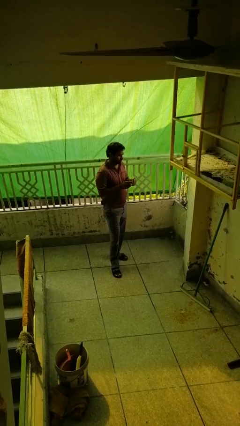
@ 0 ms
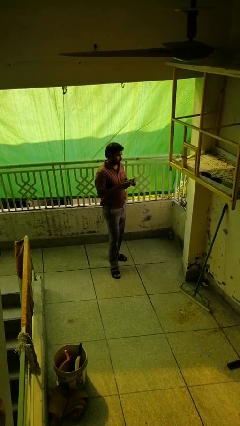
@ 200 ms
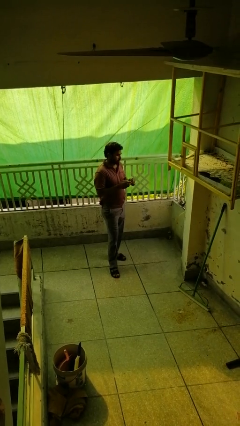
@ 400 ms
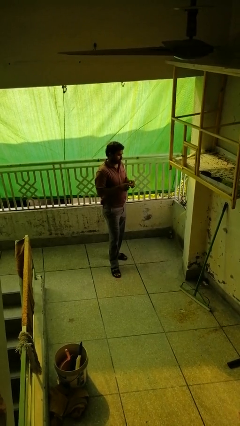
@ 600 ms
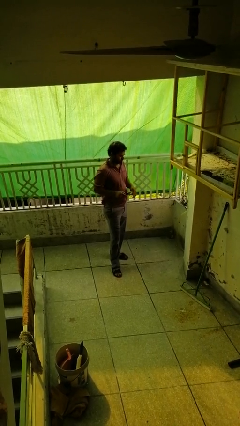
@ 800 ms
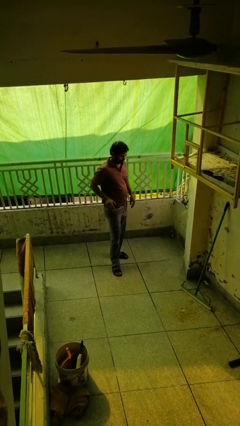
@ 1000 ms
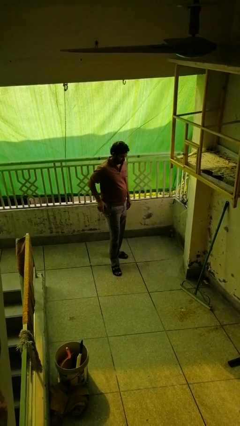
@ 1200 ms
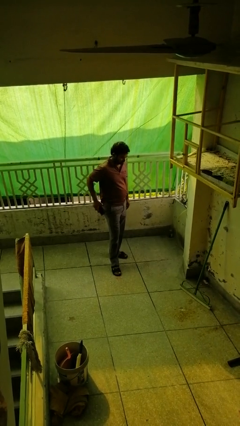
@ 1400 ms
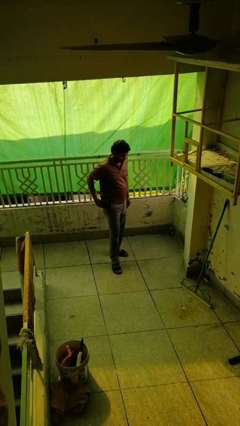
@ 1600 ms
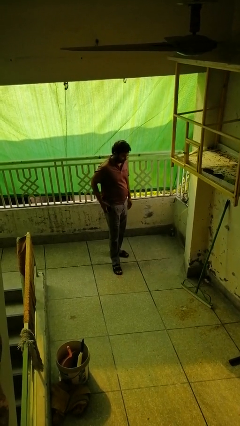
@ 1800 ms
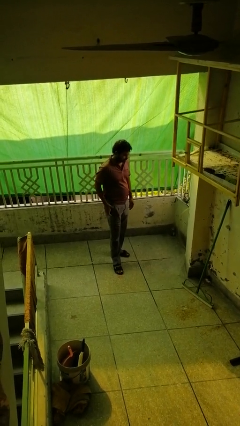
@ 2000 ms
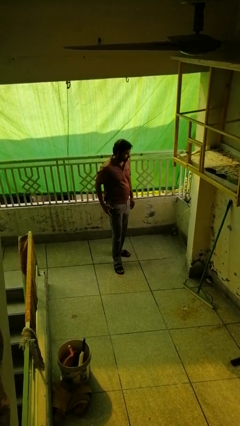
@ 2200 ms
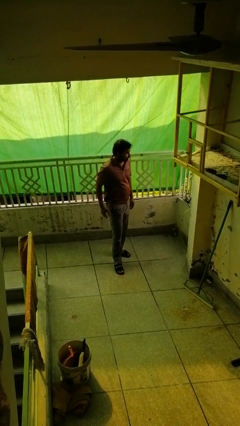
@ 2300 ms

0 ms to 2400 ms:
person puts phone into pocket

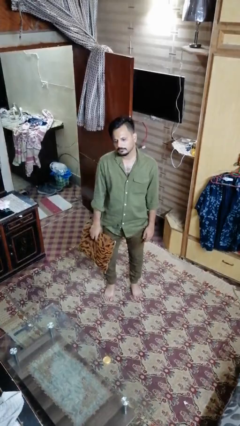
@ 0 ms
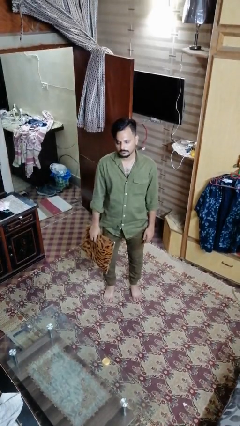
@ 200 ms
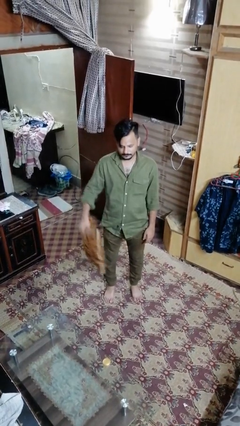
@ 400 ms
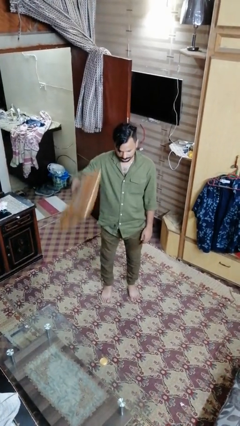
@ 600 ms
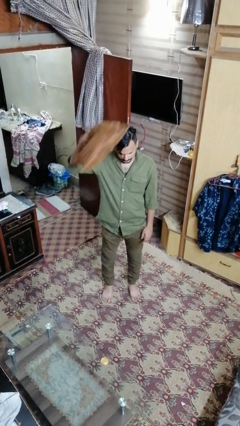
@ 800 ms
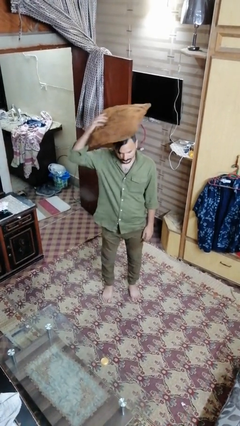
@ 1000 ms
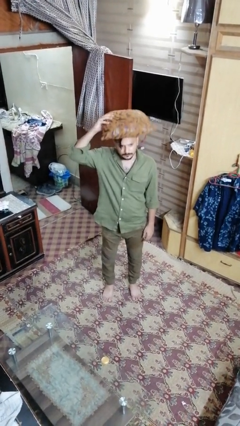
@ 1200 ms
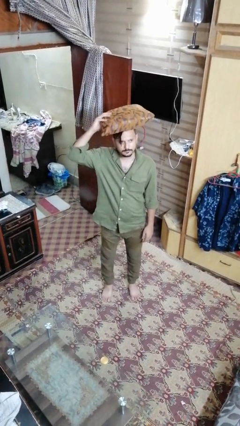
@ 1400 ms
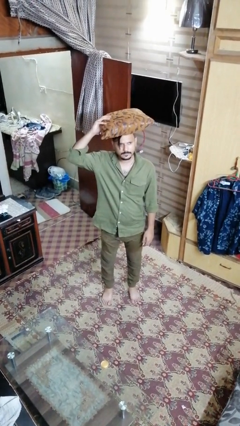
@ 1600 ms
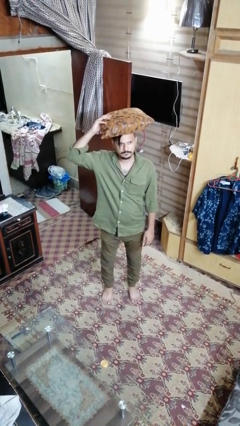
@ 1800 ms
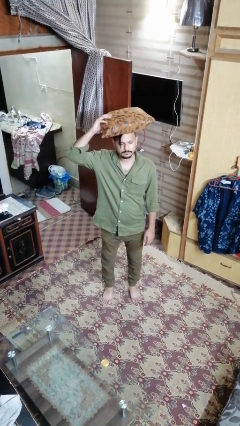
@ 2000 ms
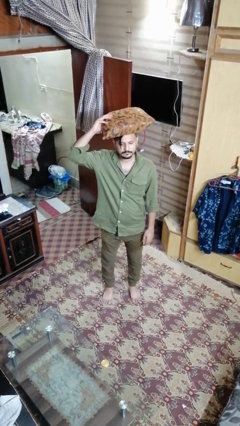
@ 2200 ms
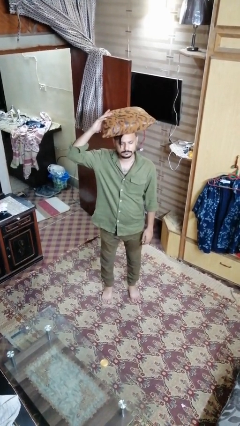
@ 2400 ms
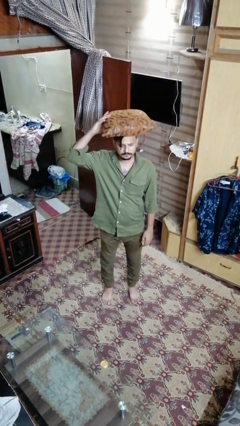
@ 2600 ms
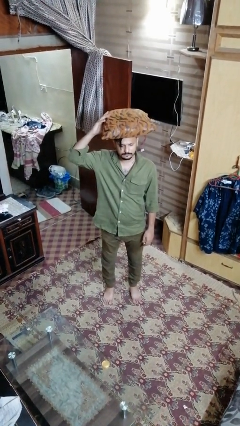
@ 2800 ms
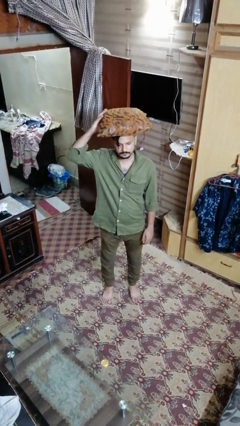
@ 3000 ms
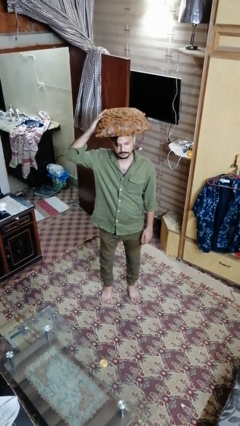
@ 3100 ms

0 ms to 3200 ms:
person holds object above head

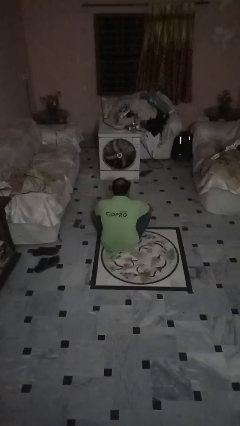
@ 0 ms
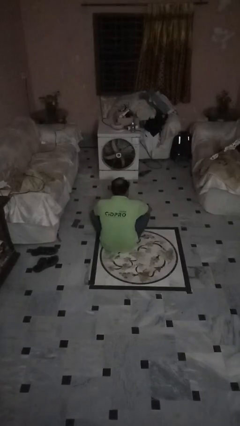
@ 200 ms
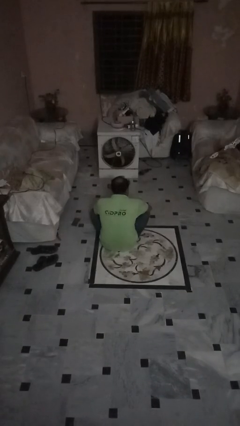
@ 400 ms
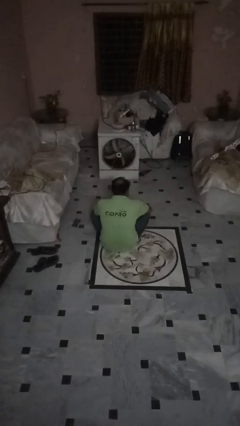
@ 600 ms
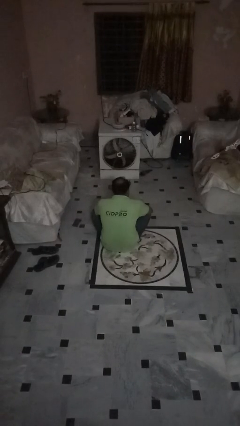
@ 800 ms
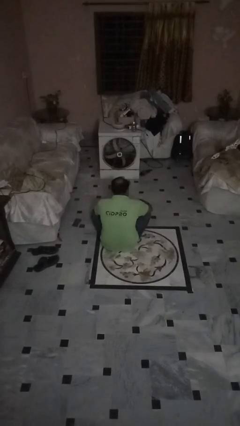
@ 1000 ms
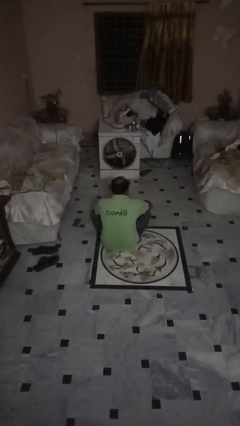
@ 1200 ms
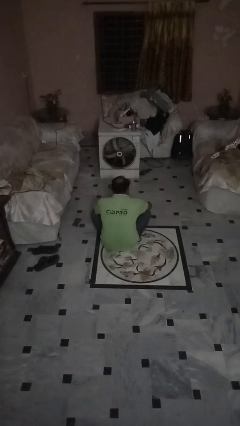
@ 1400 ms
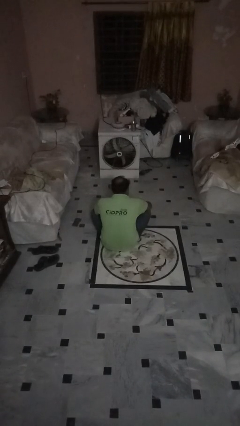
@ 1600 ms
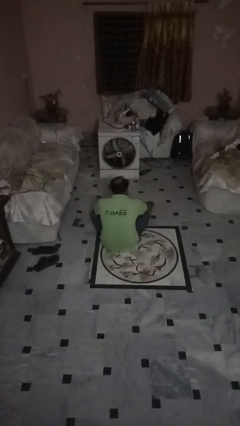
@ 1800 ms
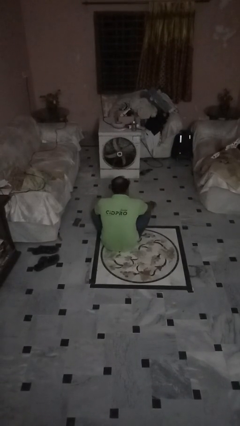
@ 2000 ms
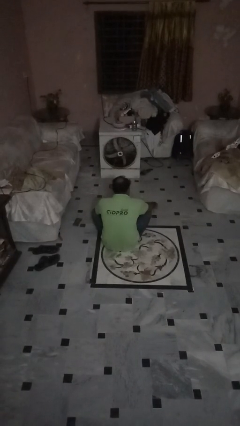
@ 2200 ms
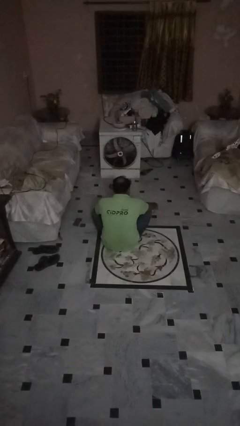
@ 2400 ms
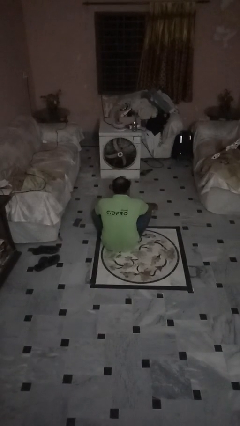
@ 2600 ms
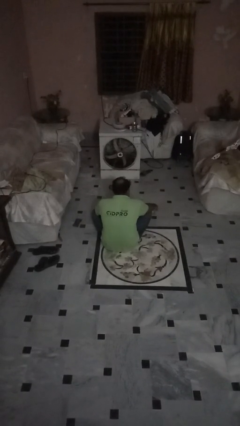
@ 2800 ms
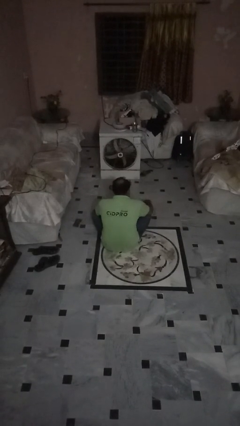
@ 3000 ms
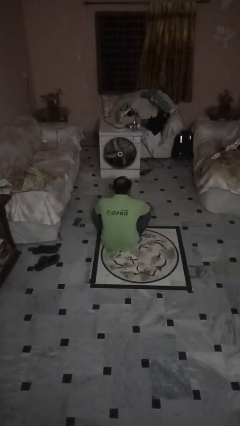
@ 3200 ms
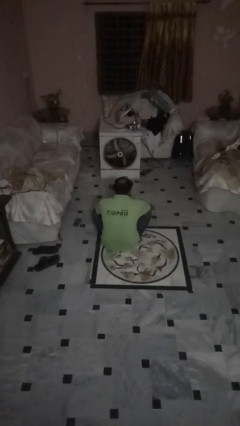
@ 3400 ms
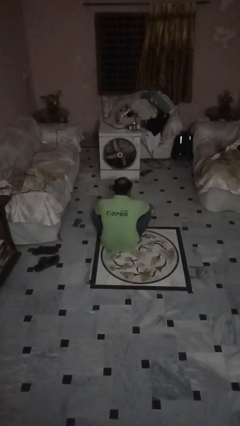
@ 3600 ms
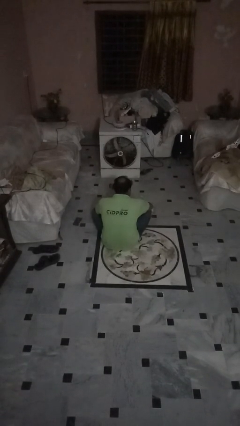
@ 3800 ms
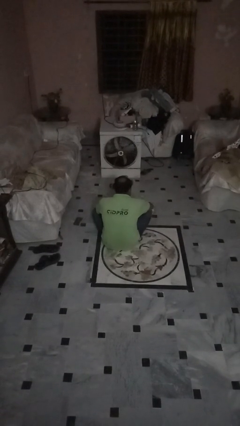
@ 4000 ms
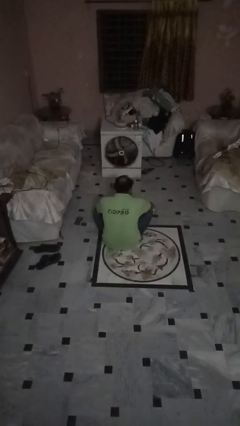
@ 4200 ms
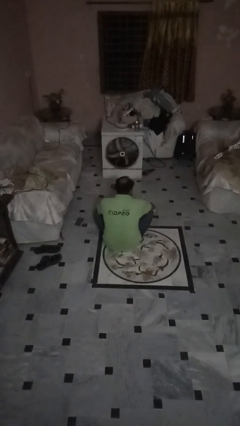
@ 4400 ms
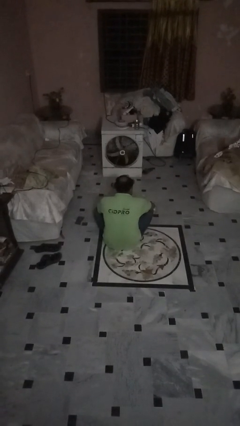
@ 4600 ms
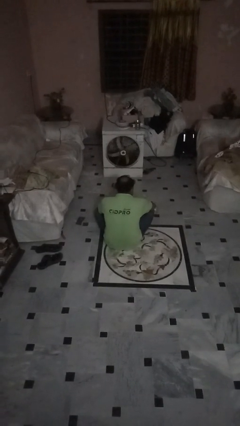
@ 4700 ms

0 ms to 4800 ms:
person sets upright glass

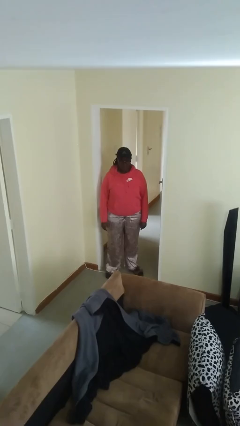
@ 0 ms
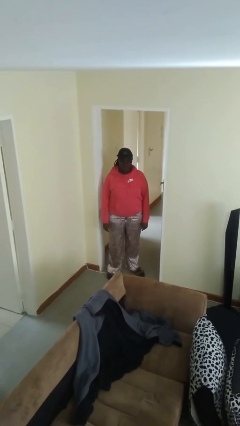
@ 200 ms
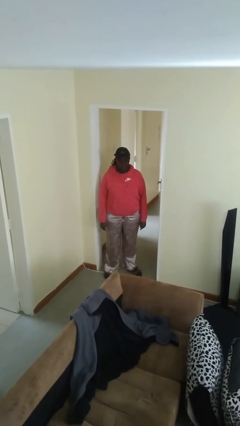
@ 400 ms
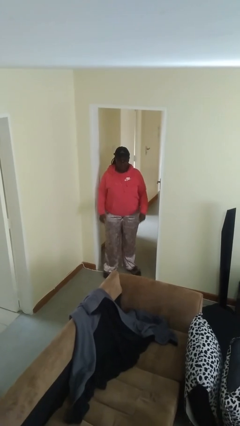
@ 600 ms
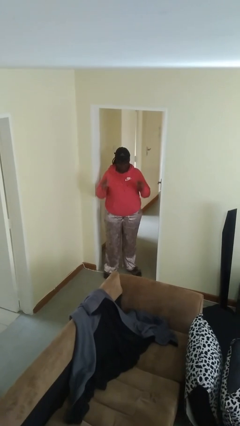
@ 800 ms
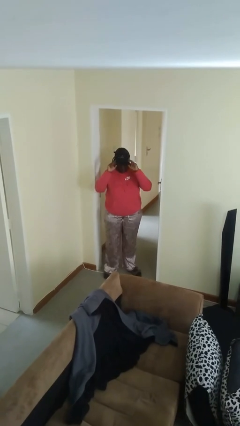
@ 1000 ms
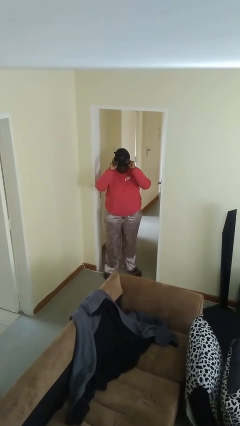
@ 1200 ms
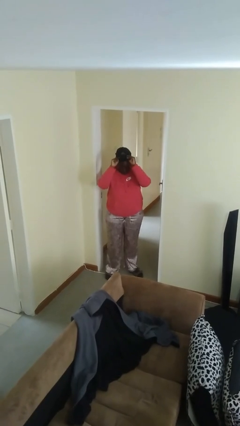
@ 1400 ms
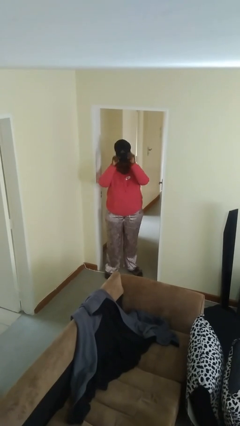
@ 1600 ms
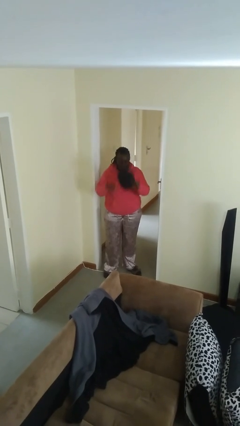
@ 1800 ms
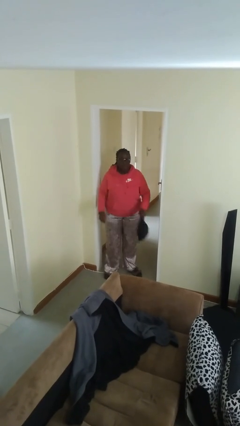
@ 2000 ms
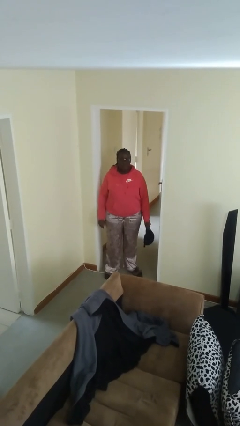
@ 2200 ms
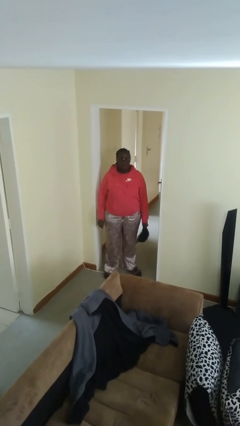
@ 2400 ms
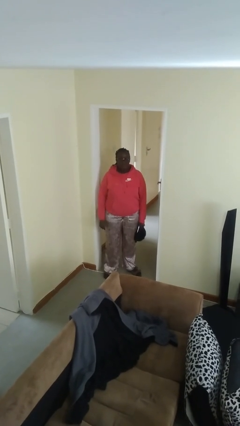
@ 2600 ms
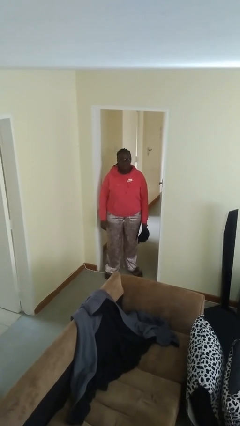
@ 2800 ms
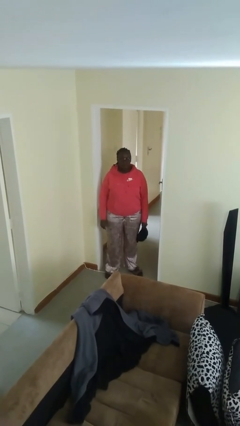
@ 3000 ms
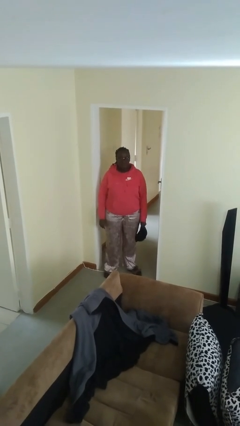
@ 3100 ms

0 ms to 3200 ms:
person takes off hat

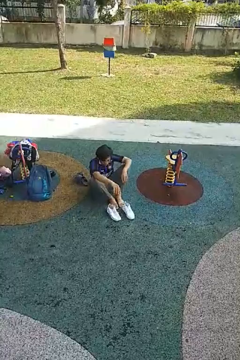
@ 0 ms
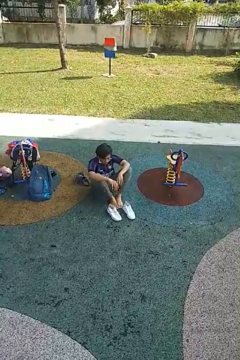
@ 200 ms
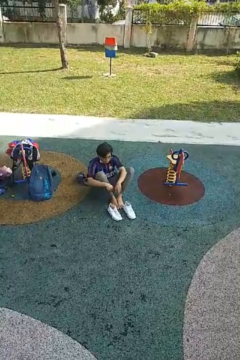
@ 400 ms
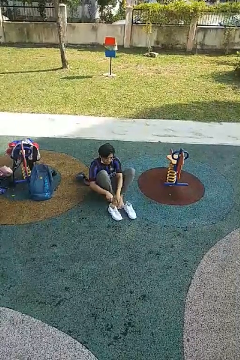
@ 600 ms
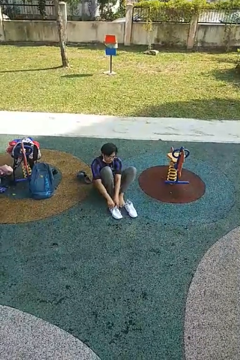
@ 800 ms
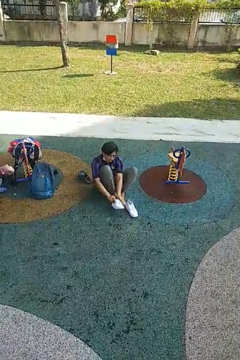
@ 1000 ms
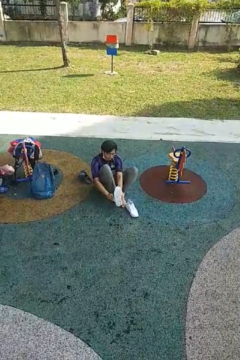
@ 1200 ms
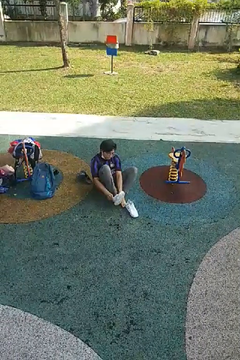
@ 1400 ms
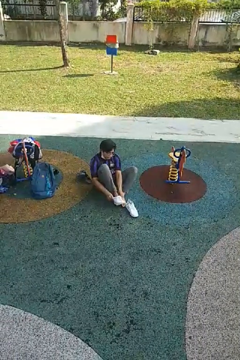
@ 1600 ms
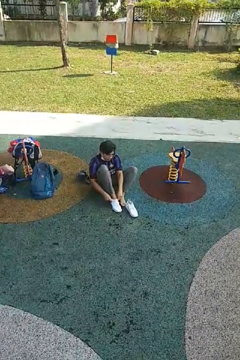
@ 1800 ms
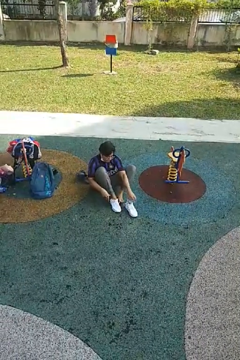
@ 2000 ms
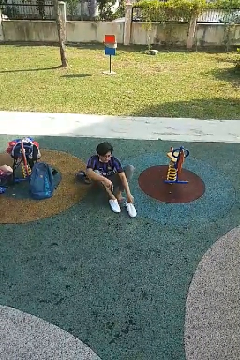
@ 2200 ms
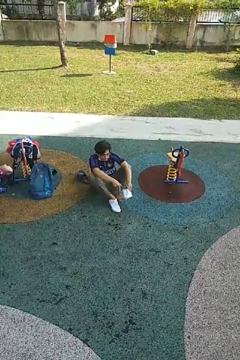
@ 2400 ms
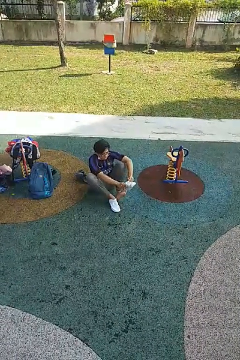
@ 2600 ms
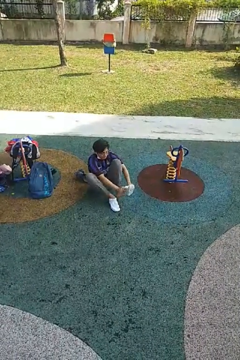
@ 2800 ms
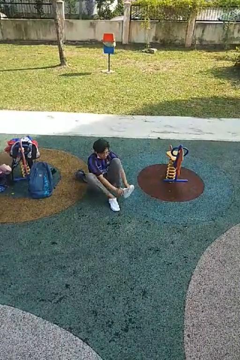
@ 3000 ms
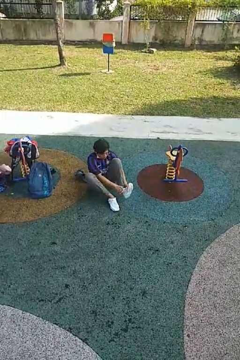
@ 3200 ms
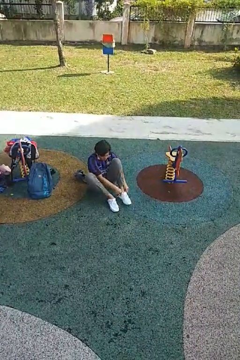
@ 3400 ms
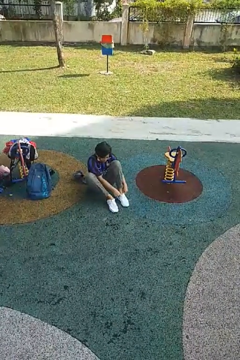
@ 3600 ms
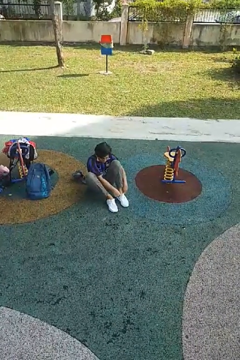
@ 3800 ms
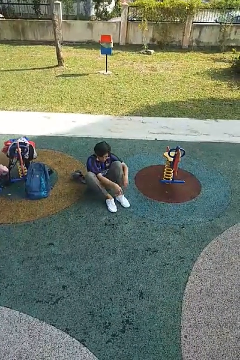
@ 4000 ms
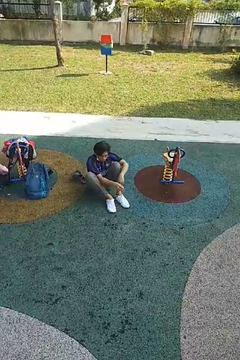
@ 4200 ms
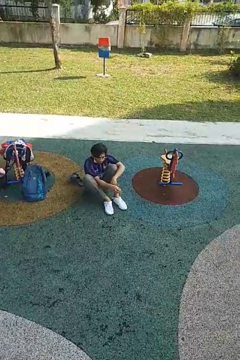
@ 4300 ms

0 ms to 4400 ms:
person puts on shoes

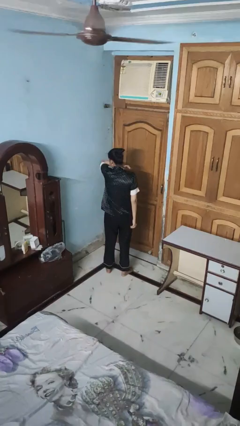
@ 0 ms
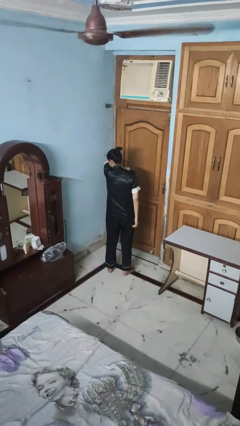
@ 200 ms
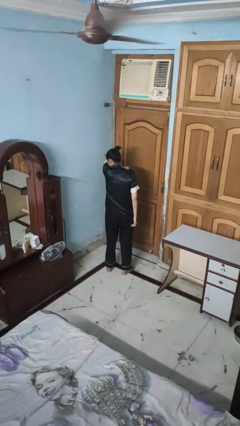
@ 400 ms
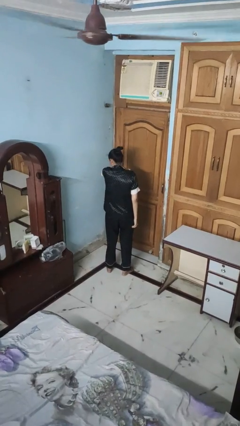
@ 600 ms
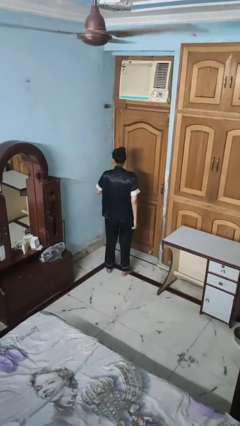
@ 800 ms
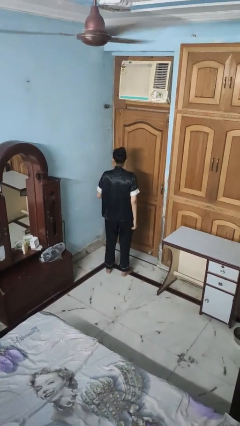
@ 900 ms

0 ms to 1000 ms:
person sneezes into arm
